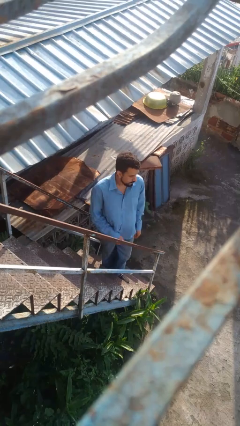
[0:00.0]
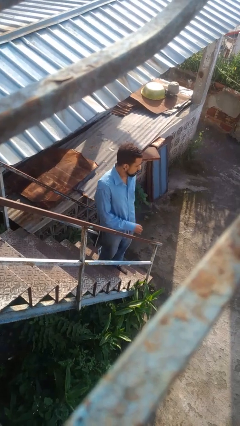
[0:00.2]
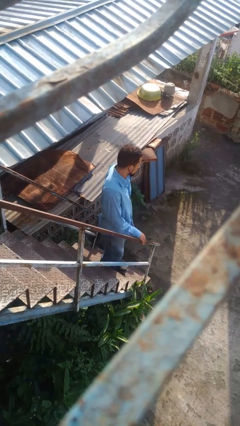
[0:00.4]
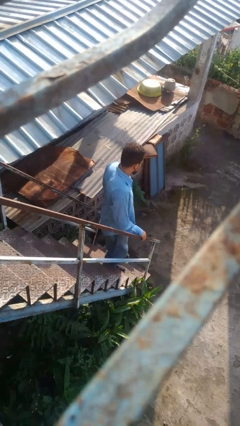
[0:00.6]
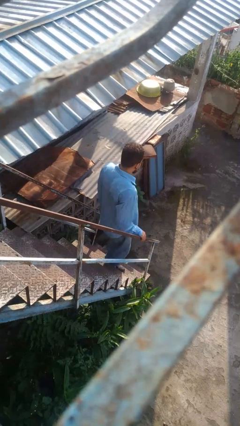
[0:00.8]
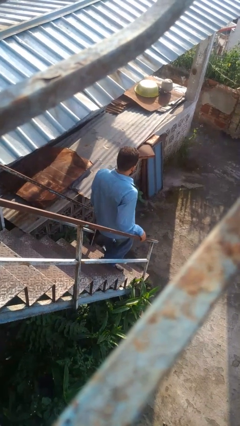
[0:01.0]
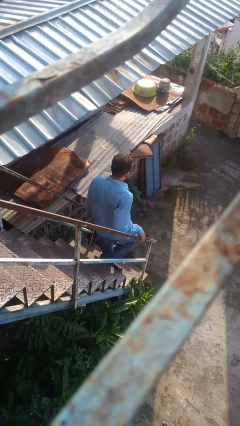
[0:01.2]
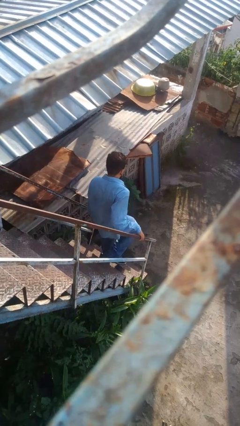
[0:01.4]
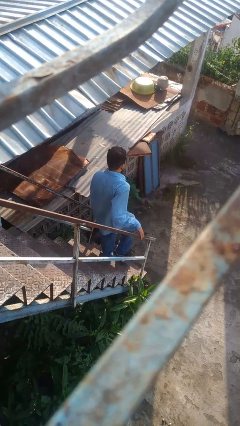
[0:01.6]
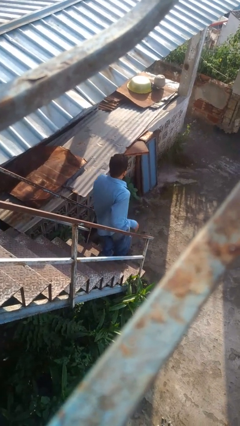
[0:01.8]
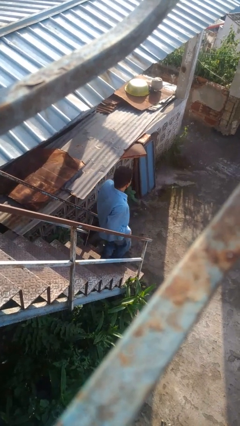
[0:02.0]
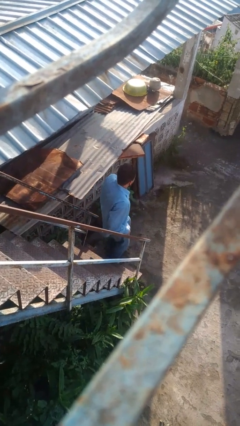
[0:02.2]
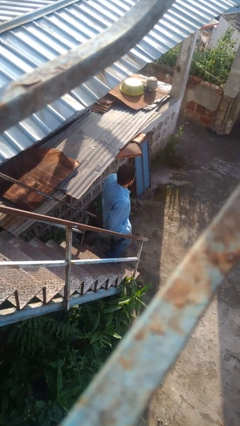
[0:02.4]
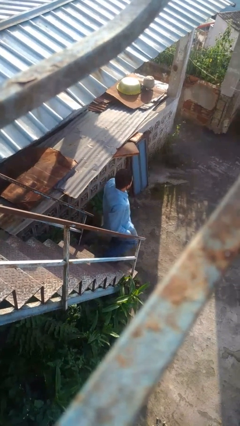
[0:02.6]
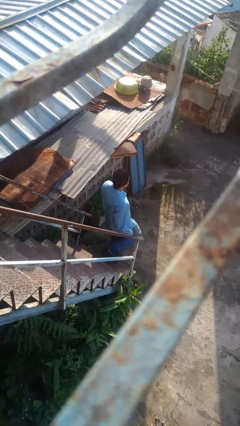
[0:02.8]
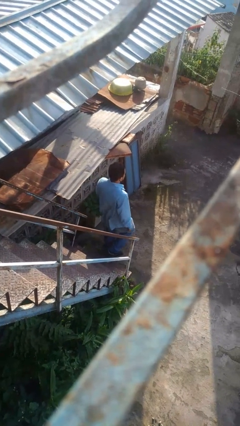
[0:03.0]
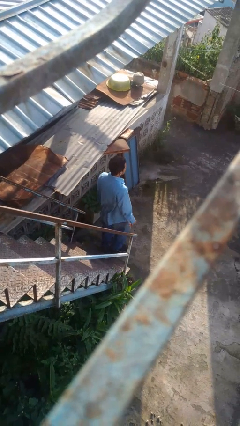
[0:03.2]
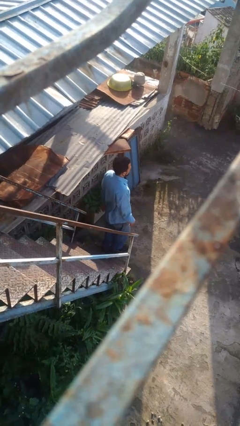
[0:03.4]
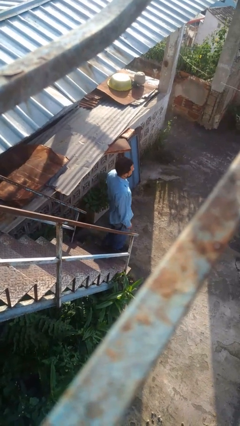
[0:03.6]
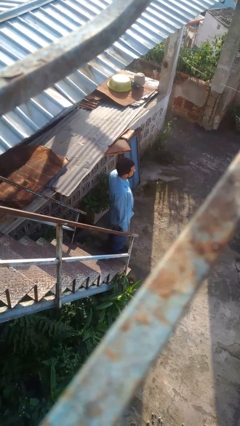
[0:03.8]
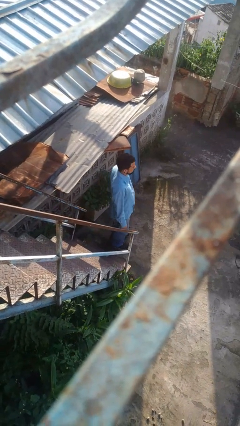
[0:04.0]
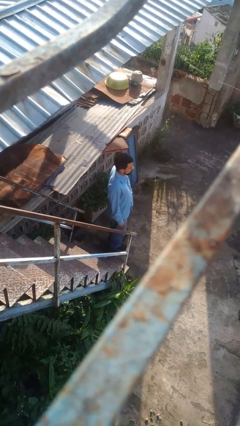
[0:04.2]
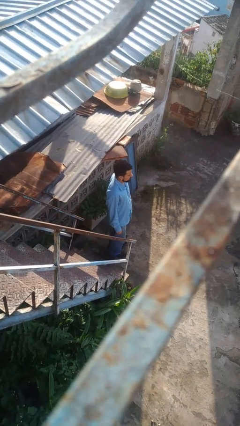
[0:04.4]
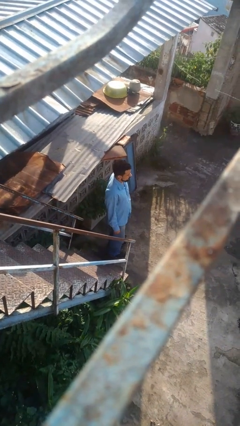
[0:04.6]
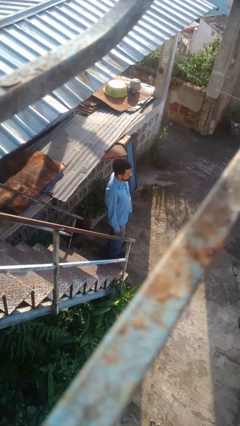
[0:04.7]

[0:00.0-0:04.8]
person climbs down stairs

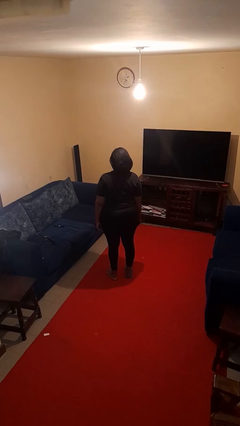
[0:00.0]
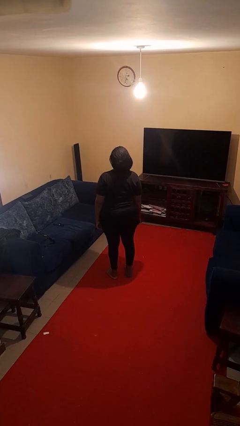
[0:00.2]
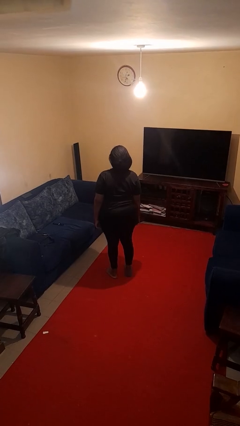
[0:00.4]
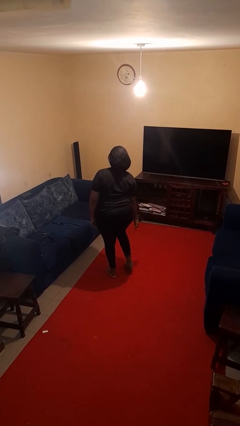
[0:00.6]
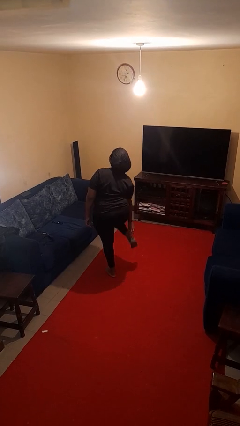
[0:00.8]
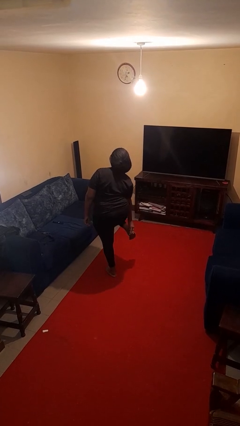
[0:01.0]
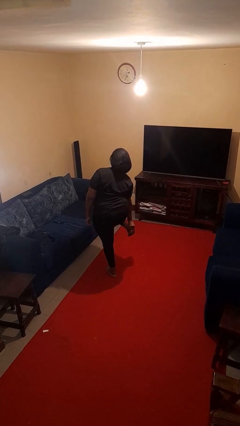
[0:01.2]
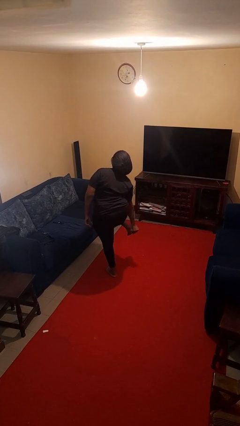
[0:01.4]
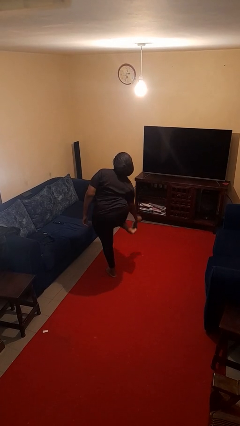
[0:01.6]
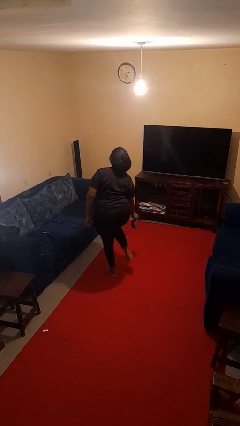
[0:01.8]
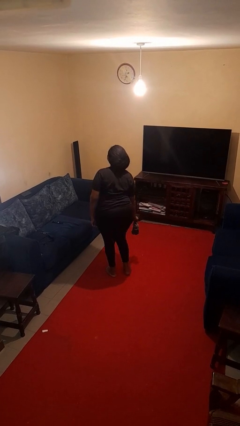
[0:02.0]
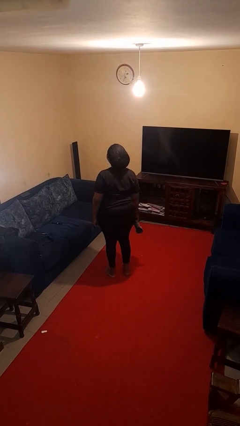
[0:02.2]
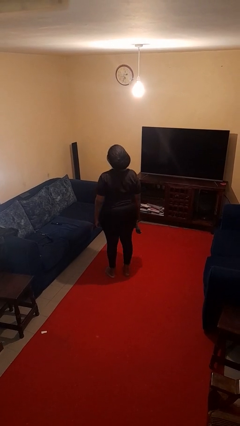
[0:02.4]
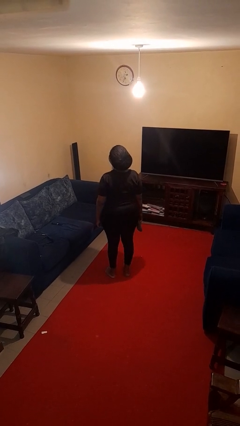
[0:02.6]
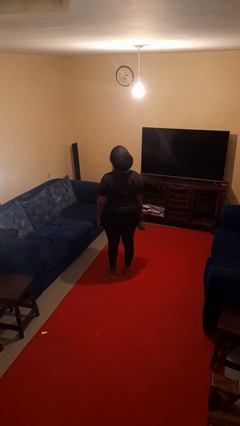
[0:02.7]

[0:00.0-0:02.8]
person takes off socks

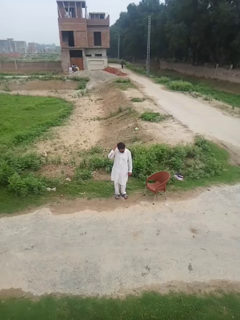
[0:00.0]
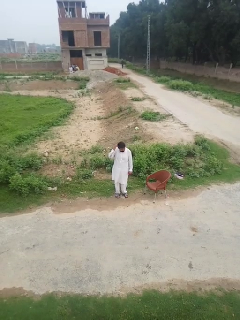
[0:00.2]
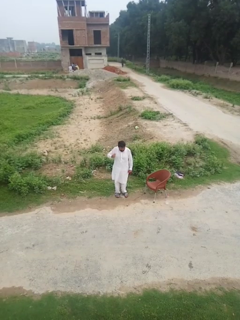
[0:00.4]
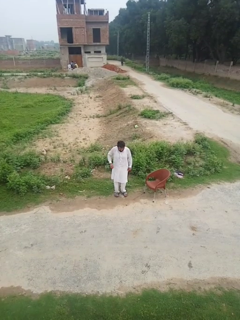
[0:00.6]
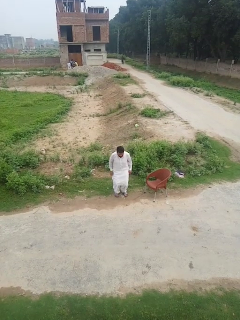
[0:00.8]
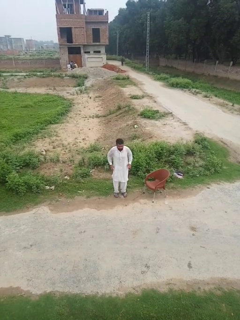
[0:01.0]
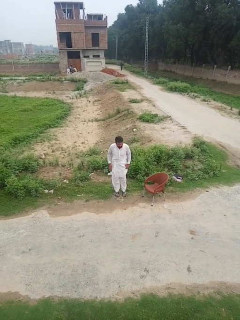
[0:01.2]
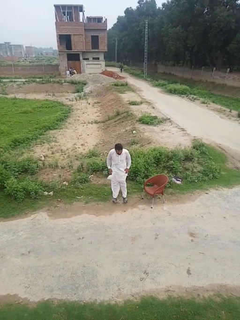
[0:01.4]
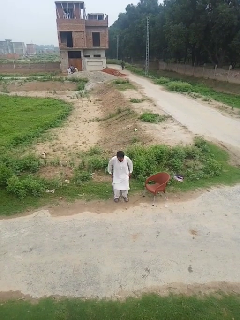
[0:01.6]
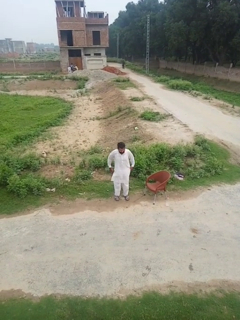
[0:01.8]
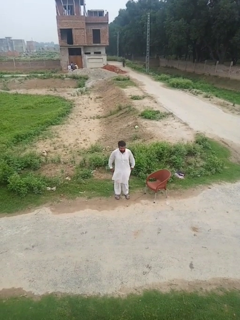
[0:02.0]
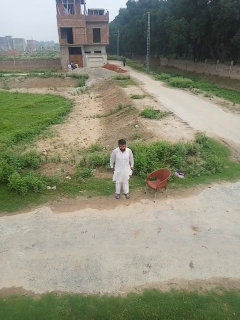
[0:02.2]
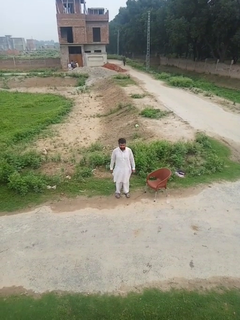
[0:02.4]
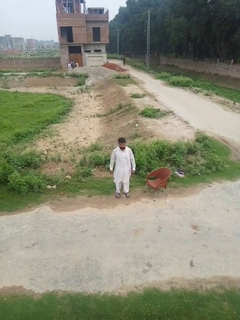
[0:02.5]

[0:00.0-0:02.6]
person jumps

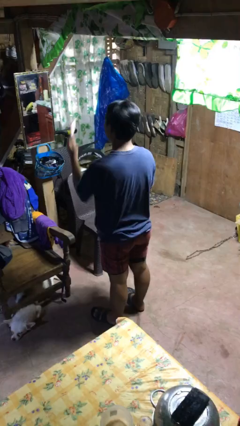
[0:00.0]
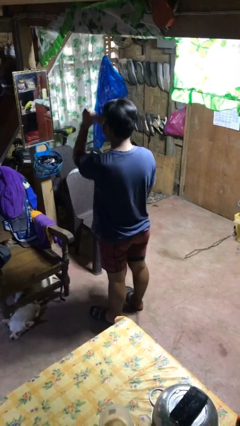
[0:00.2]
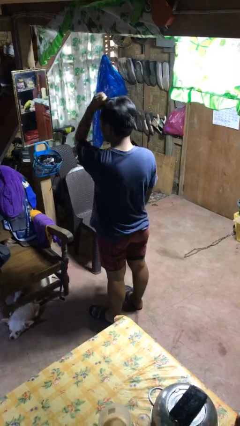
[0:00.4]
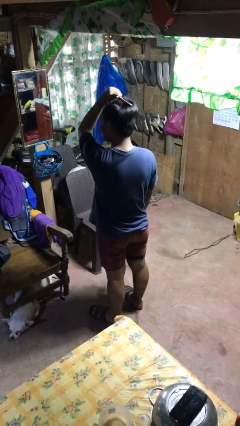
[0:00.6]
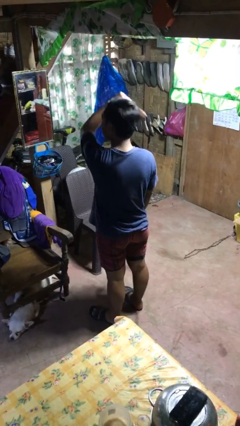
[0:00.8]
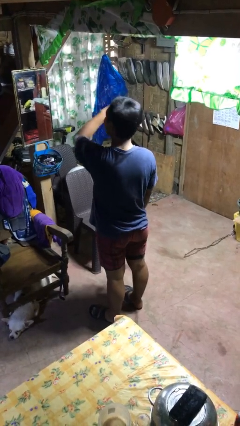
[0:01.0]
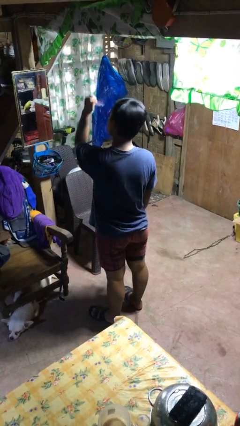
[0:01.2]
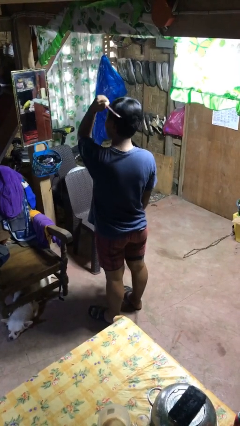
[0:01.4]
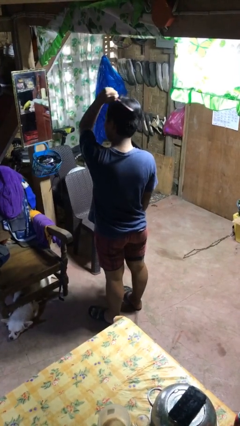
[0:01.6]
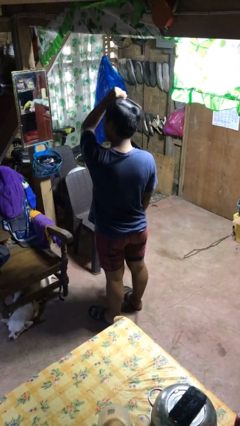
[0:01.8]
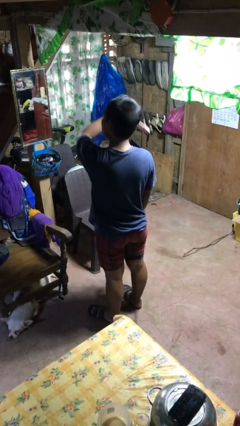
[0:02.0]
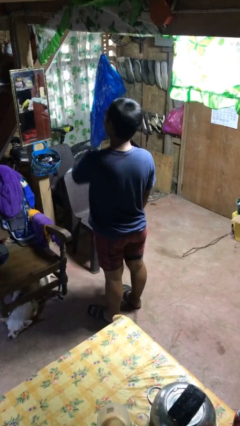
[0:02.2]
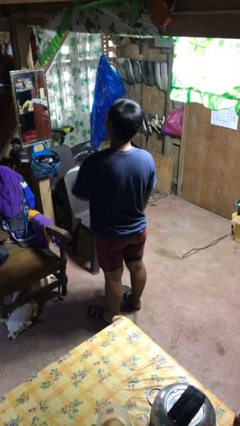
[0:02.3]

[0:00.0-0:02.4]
person brushes hair

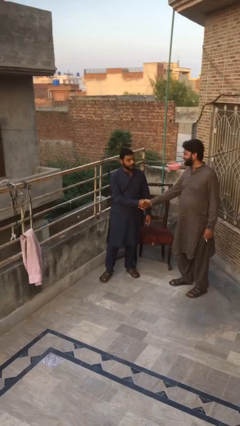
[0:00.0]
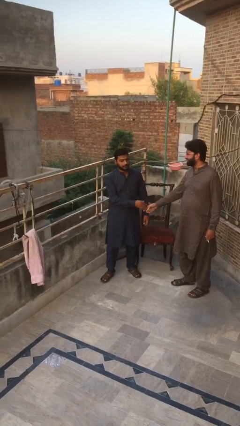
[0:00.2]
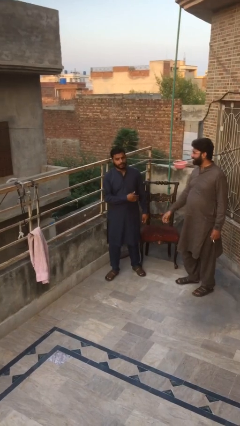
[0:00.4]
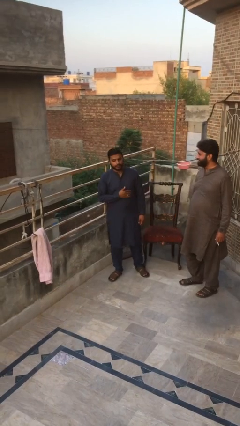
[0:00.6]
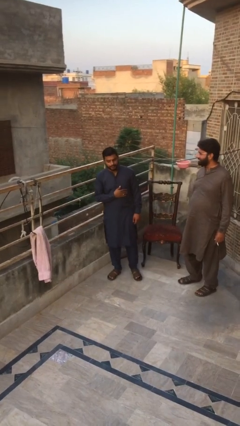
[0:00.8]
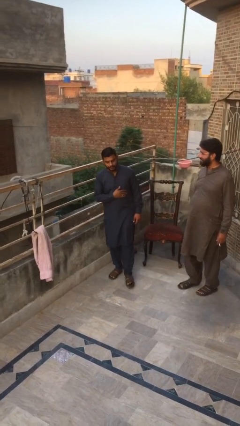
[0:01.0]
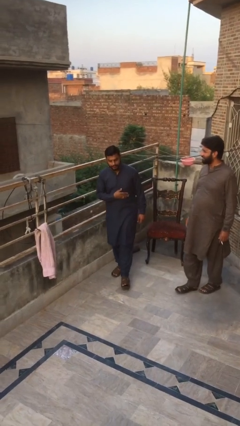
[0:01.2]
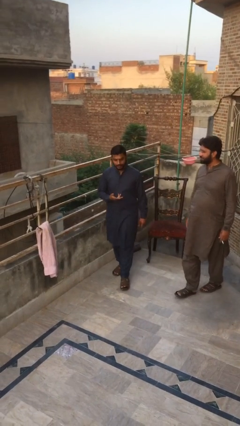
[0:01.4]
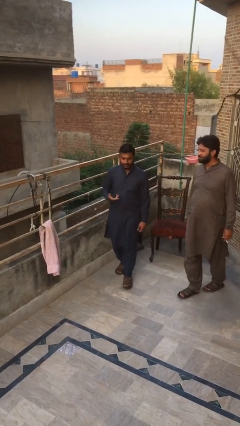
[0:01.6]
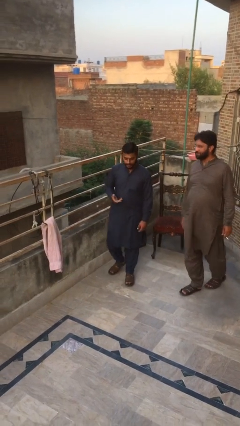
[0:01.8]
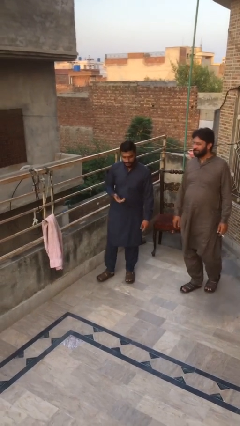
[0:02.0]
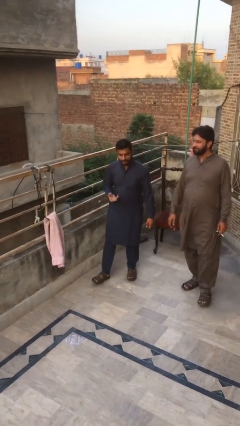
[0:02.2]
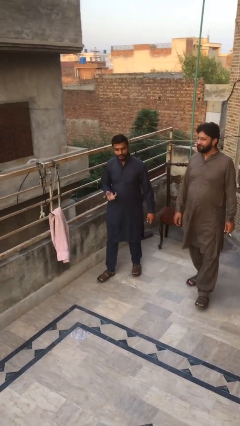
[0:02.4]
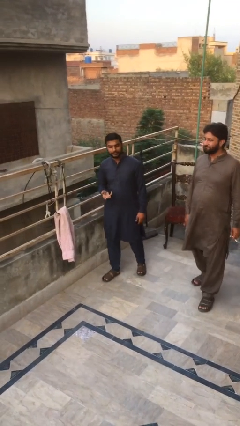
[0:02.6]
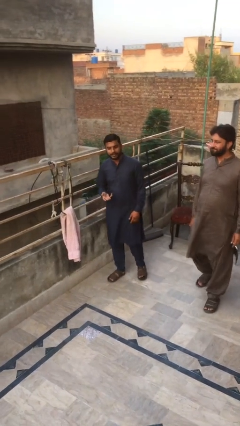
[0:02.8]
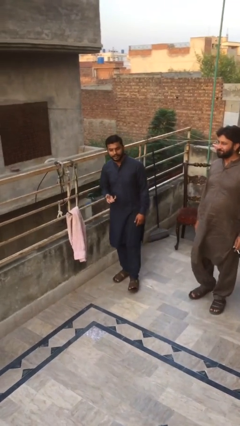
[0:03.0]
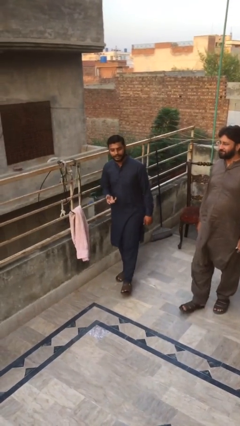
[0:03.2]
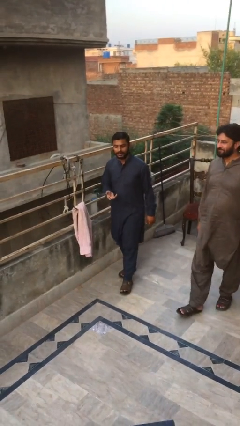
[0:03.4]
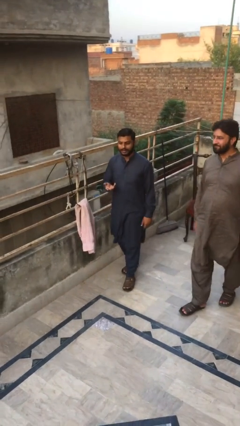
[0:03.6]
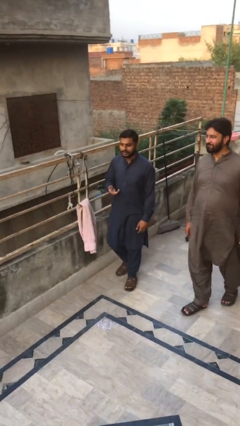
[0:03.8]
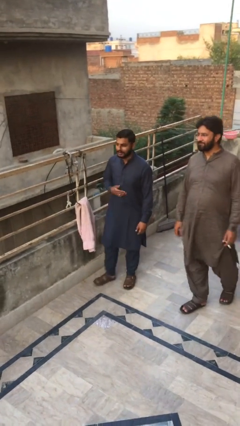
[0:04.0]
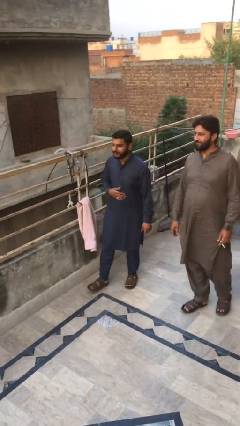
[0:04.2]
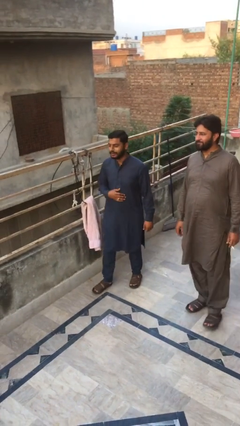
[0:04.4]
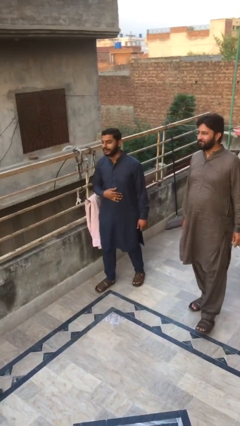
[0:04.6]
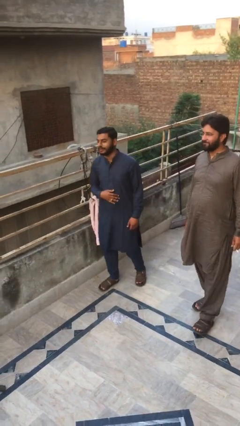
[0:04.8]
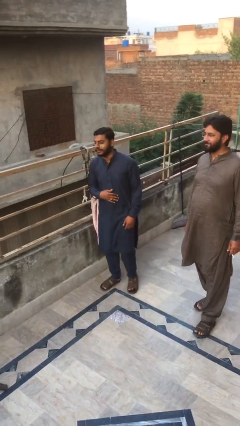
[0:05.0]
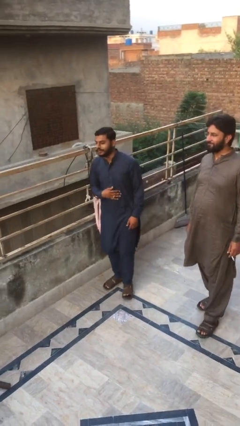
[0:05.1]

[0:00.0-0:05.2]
person talks to person

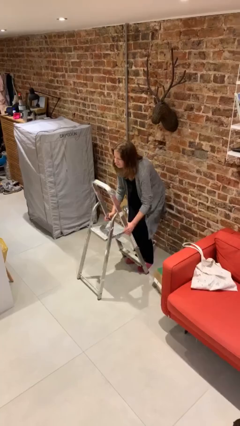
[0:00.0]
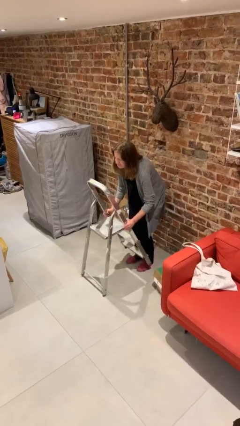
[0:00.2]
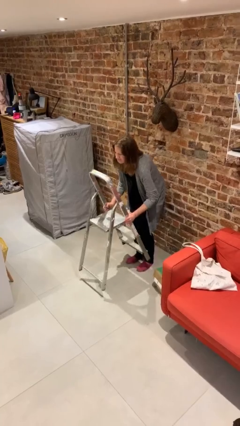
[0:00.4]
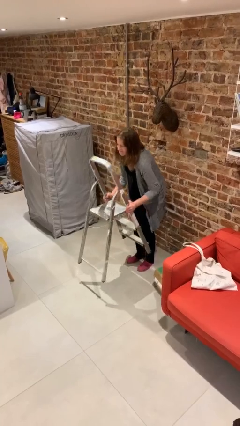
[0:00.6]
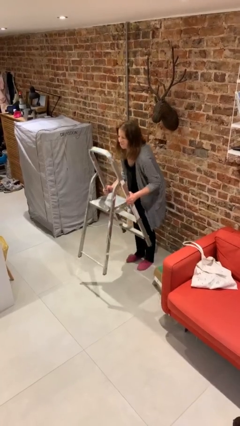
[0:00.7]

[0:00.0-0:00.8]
person picks up object from floor
